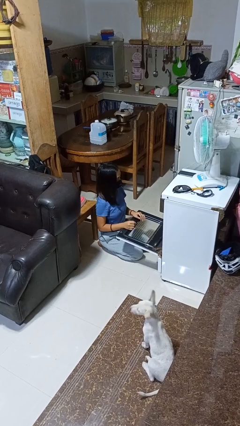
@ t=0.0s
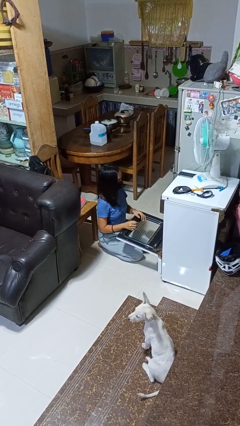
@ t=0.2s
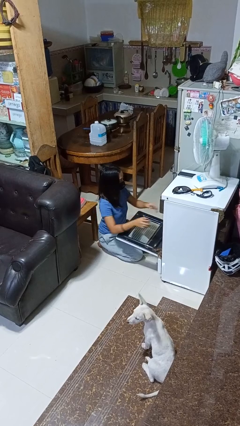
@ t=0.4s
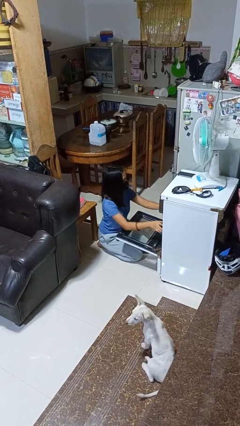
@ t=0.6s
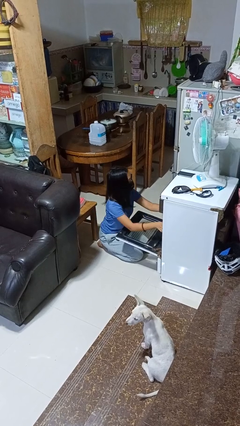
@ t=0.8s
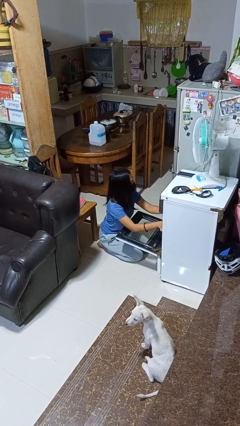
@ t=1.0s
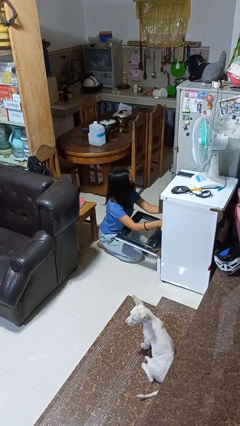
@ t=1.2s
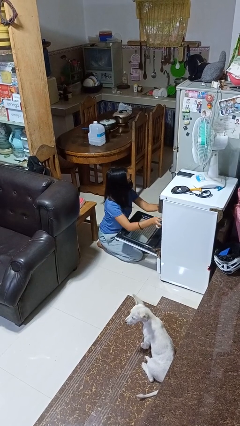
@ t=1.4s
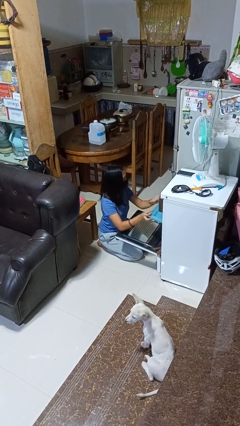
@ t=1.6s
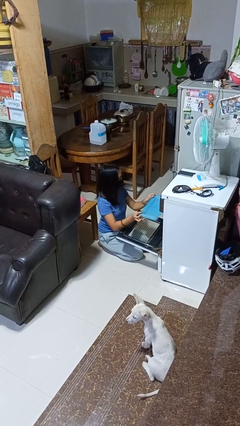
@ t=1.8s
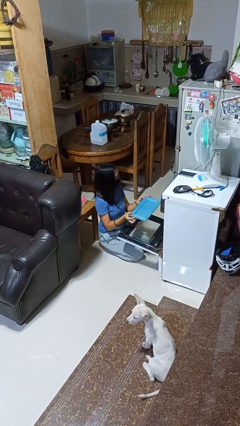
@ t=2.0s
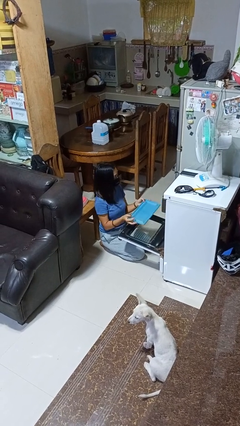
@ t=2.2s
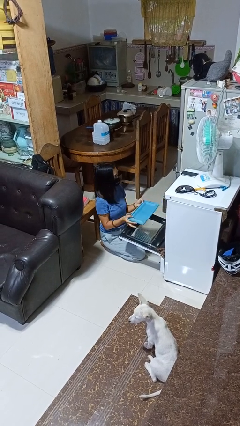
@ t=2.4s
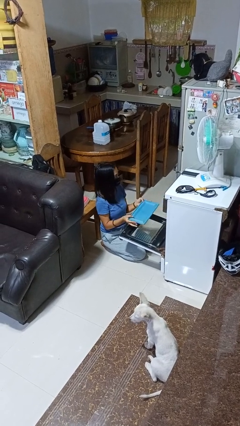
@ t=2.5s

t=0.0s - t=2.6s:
person takes object from oven

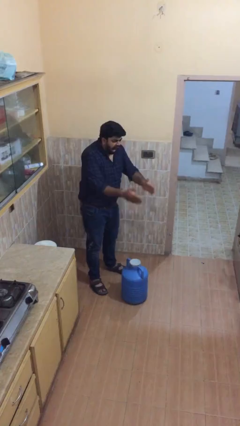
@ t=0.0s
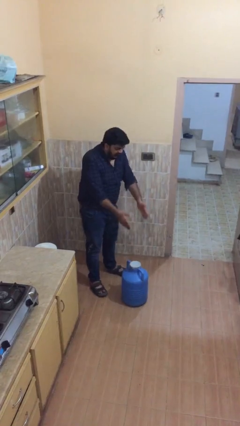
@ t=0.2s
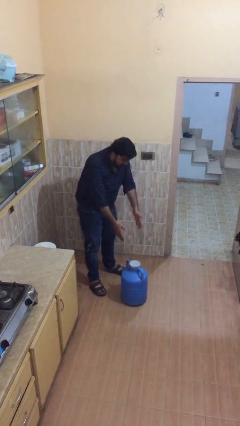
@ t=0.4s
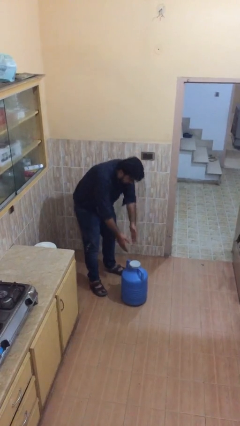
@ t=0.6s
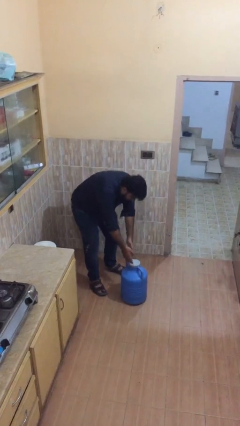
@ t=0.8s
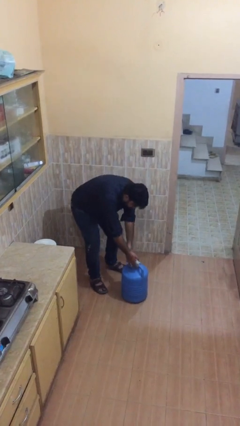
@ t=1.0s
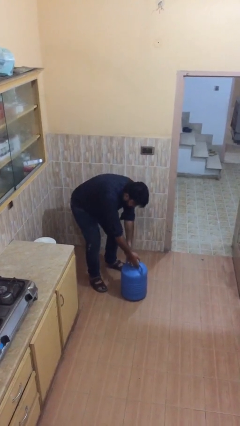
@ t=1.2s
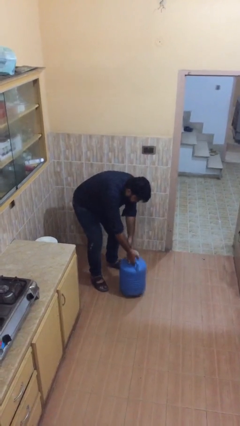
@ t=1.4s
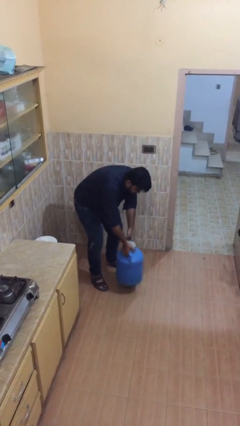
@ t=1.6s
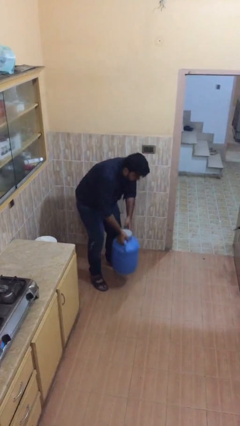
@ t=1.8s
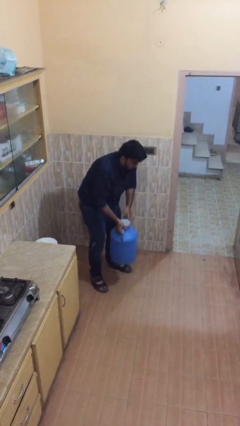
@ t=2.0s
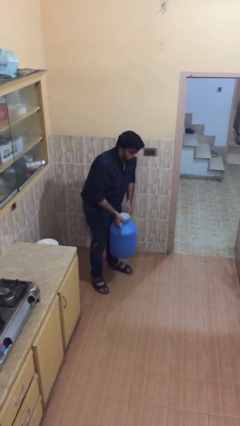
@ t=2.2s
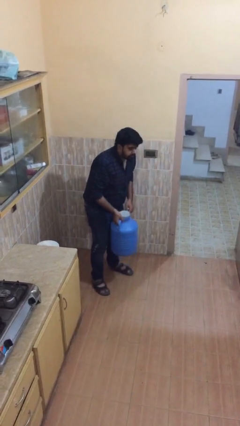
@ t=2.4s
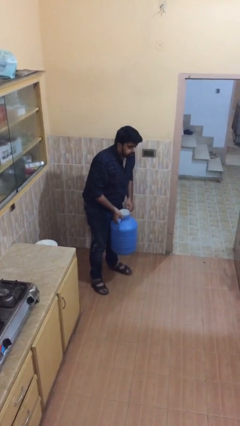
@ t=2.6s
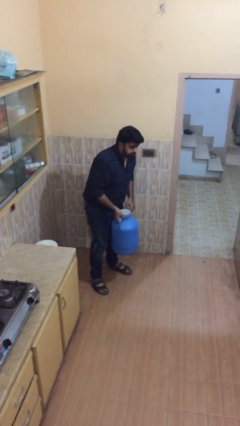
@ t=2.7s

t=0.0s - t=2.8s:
person picks up object from floor

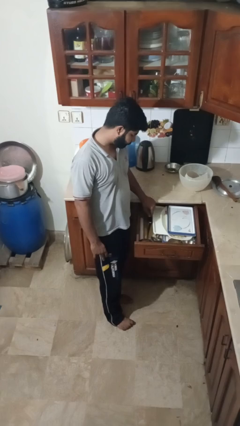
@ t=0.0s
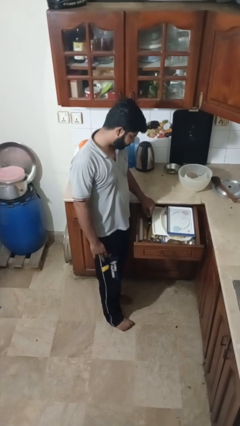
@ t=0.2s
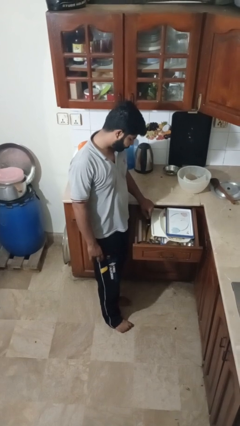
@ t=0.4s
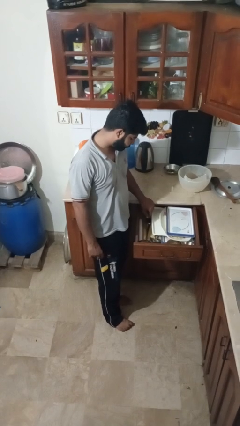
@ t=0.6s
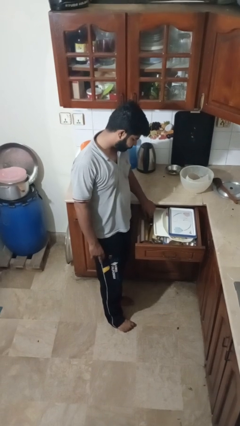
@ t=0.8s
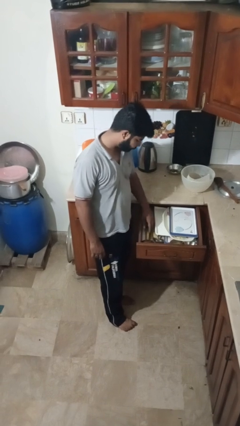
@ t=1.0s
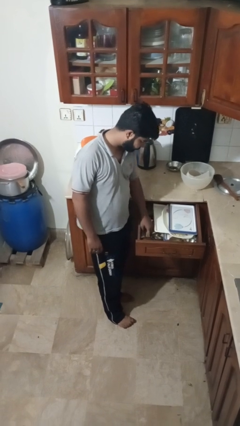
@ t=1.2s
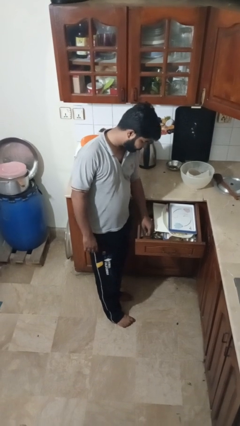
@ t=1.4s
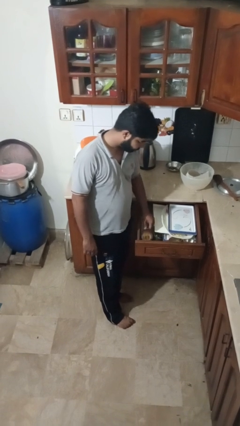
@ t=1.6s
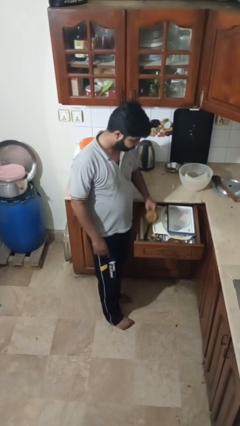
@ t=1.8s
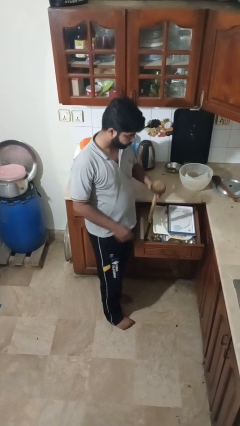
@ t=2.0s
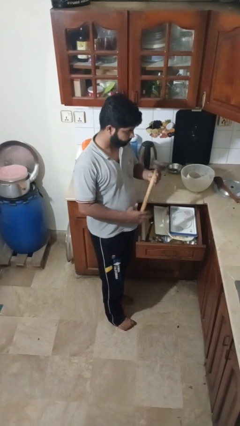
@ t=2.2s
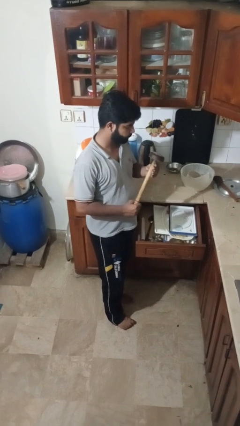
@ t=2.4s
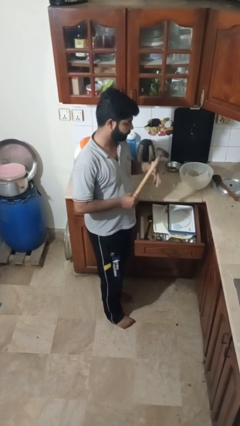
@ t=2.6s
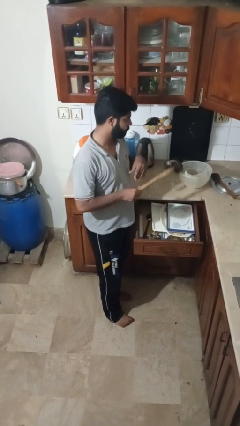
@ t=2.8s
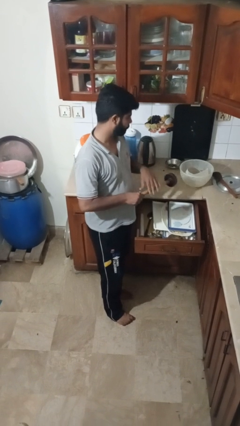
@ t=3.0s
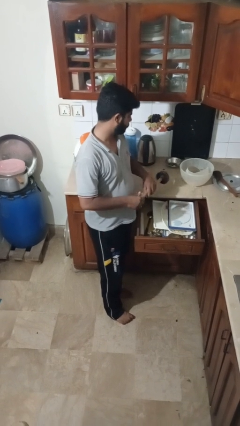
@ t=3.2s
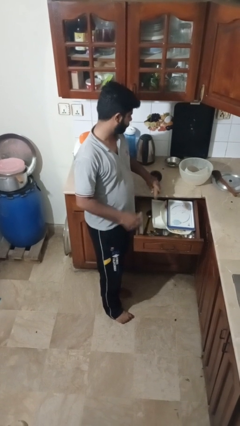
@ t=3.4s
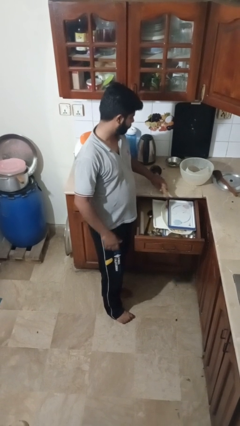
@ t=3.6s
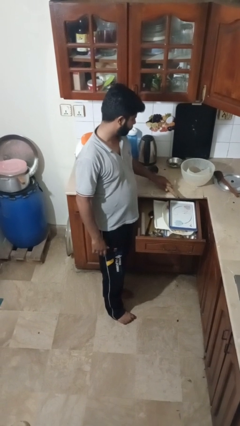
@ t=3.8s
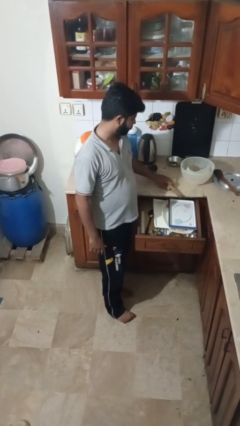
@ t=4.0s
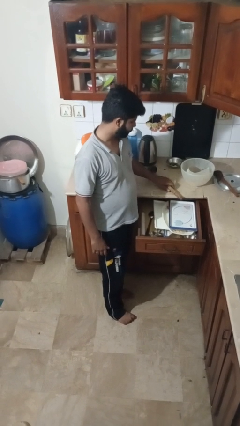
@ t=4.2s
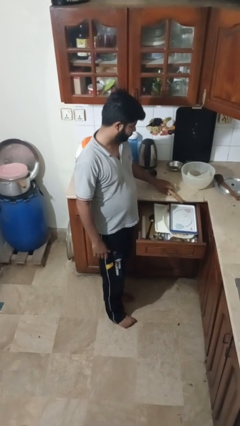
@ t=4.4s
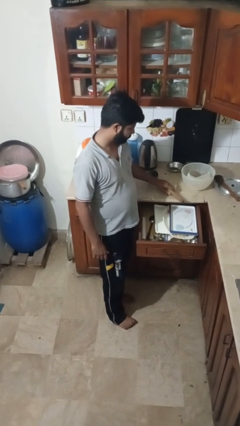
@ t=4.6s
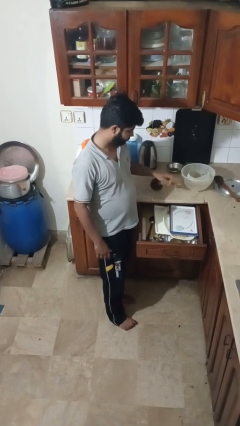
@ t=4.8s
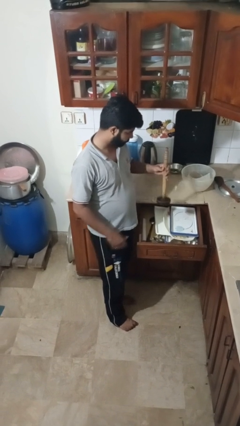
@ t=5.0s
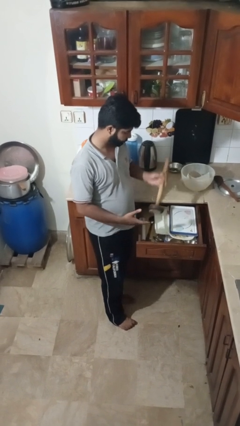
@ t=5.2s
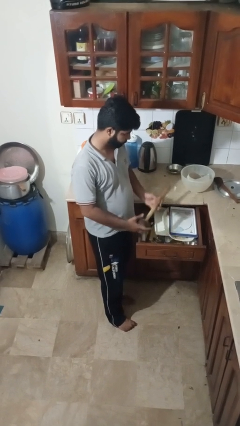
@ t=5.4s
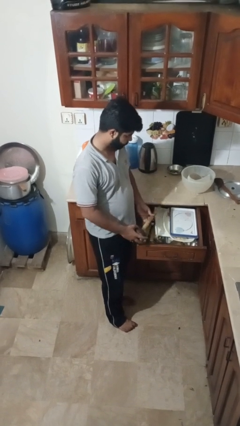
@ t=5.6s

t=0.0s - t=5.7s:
person takes object from kitchen drawer

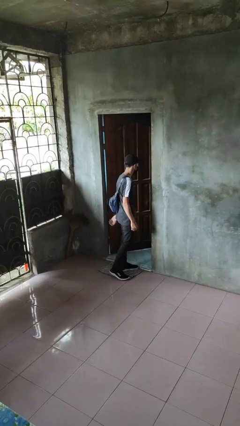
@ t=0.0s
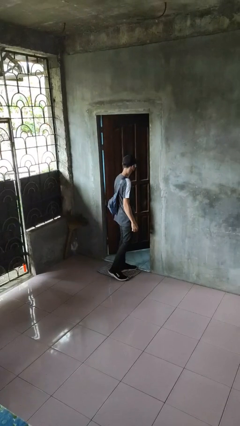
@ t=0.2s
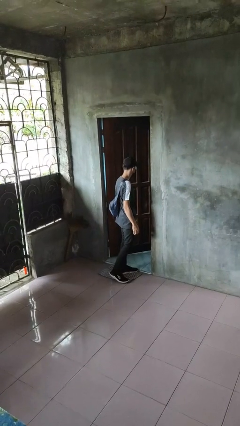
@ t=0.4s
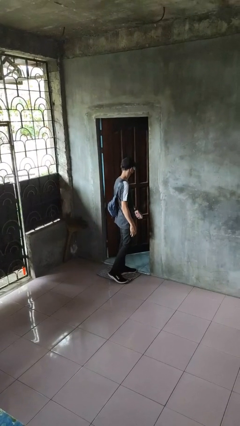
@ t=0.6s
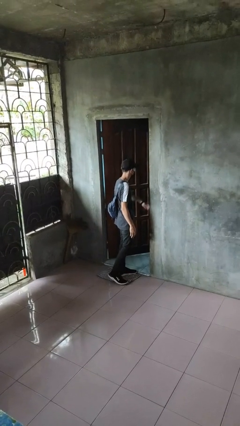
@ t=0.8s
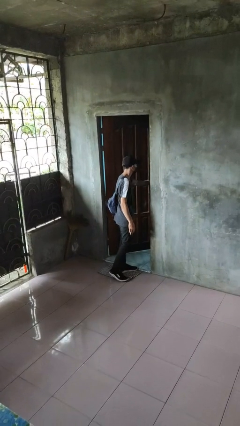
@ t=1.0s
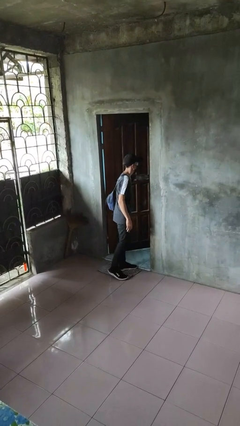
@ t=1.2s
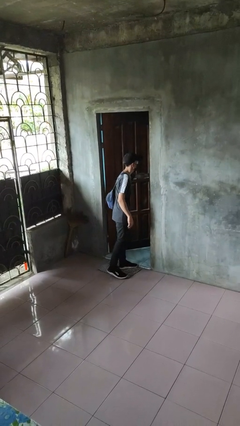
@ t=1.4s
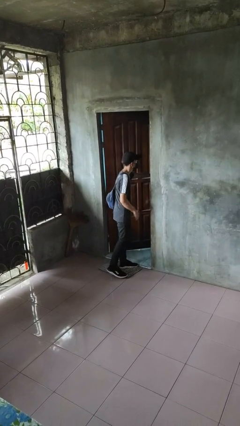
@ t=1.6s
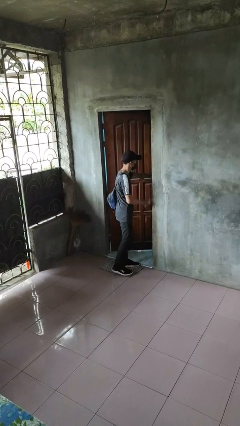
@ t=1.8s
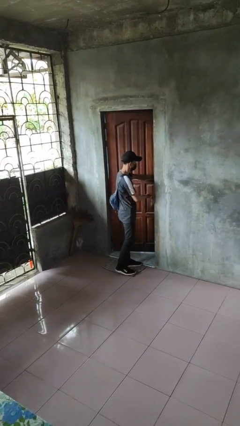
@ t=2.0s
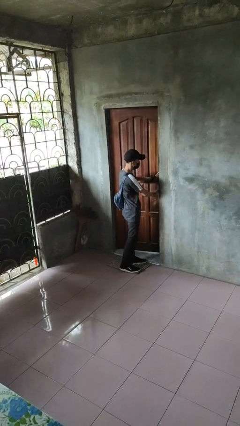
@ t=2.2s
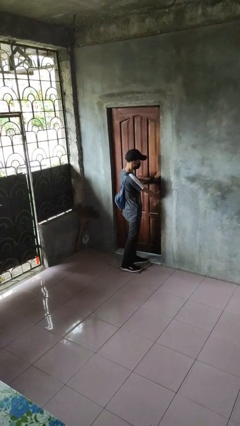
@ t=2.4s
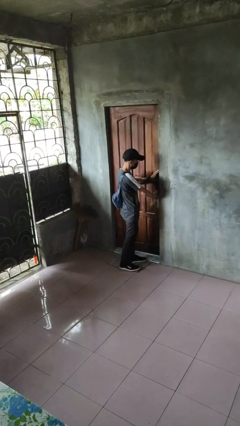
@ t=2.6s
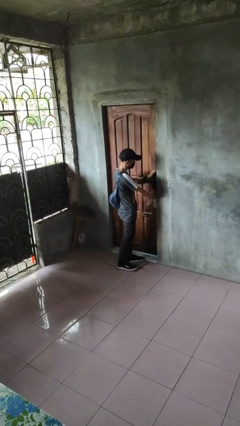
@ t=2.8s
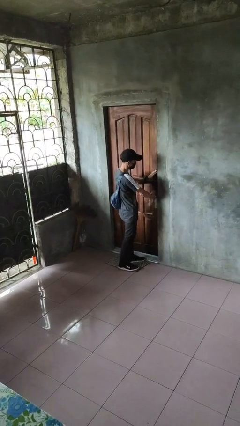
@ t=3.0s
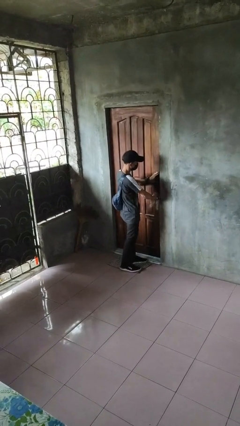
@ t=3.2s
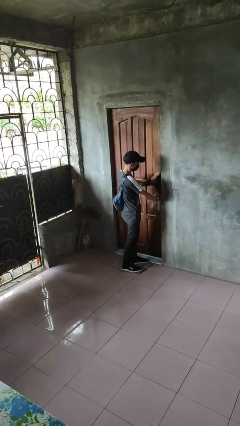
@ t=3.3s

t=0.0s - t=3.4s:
person closes facility door

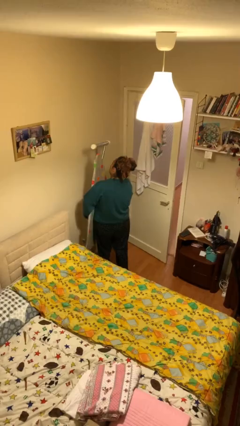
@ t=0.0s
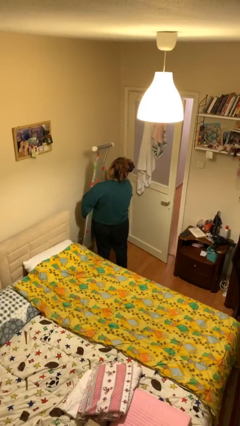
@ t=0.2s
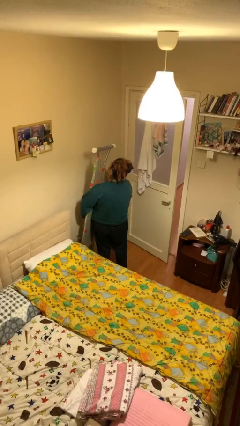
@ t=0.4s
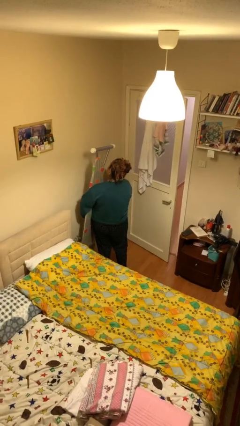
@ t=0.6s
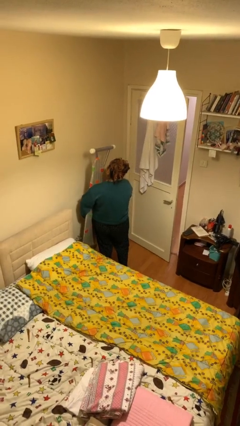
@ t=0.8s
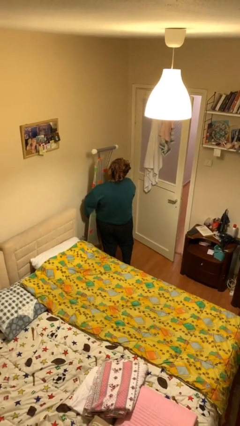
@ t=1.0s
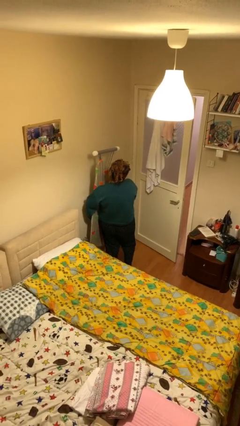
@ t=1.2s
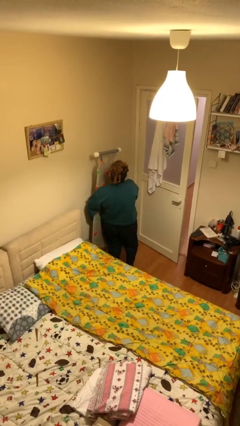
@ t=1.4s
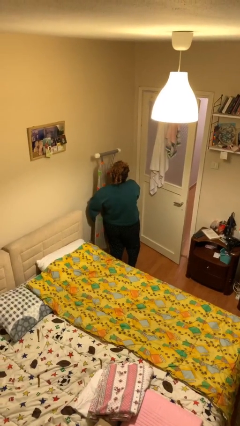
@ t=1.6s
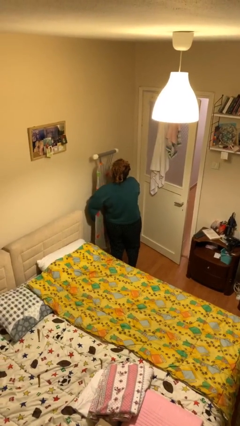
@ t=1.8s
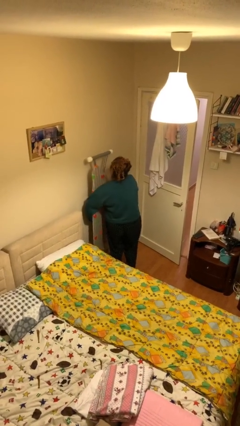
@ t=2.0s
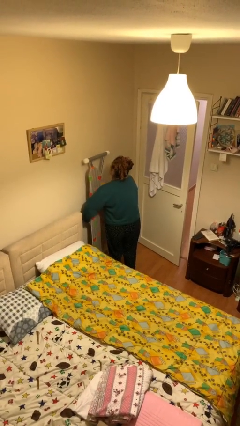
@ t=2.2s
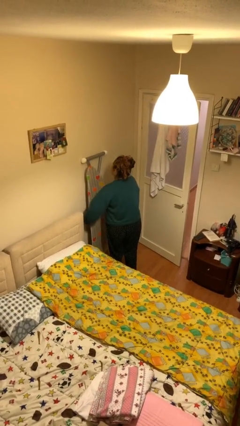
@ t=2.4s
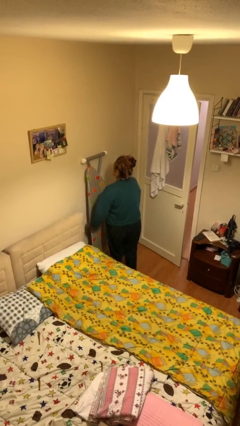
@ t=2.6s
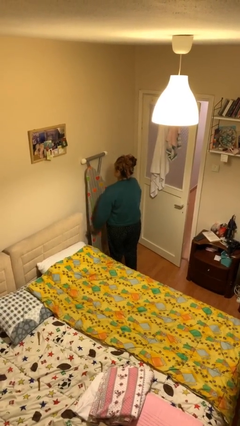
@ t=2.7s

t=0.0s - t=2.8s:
person puts down object on floor
